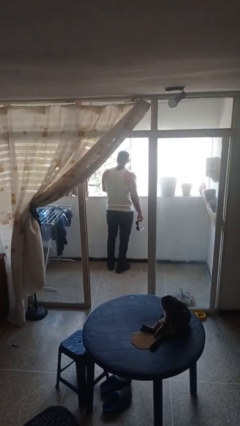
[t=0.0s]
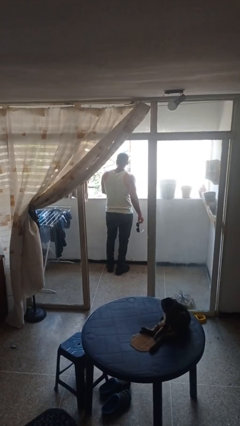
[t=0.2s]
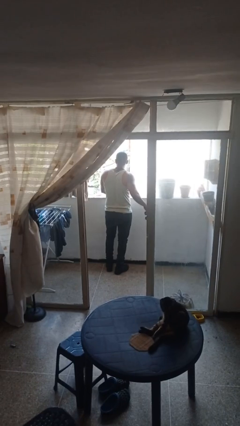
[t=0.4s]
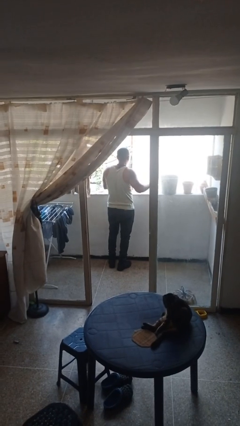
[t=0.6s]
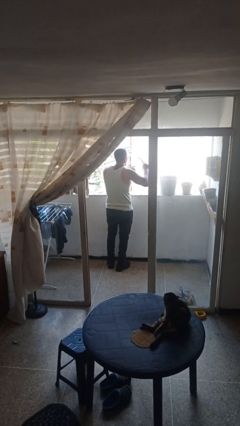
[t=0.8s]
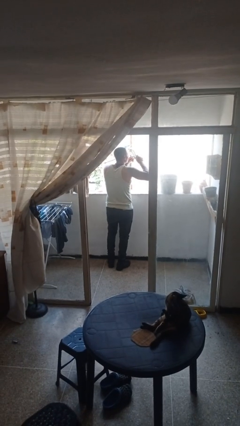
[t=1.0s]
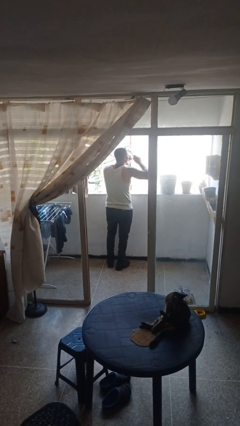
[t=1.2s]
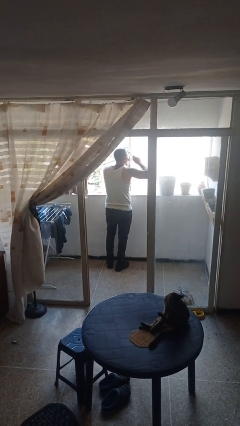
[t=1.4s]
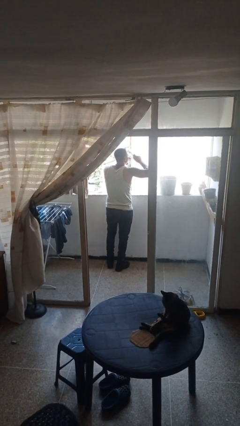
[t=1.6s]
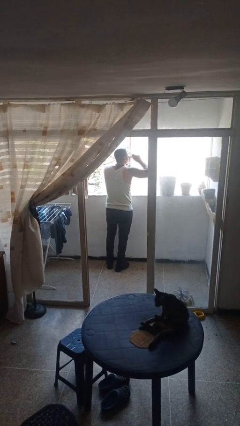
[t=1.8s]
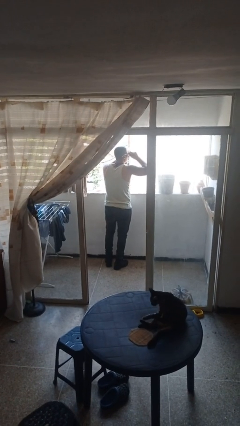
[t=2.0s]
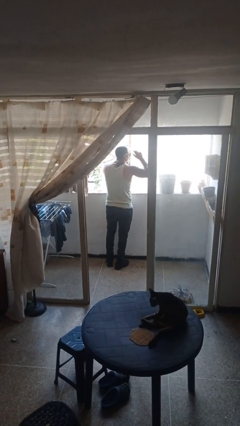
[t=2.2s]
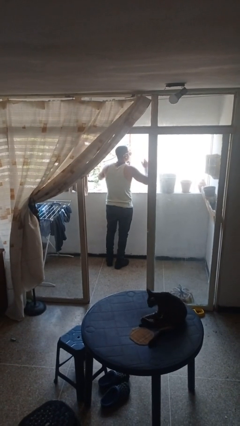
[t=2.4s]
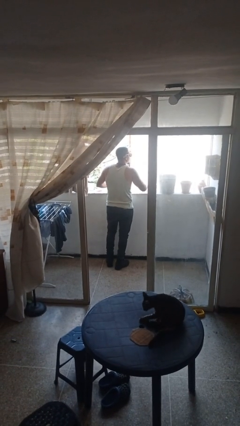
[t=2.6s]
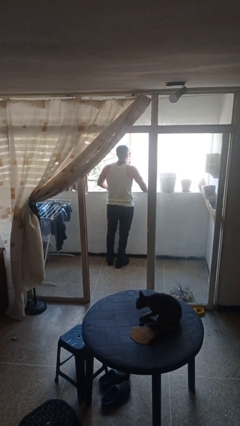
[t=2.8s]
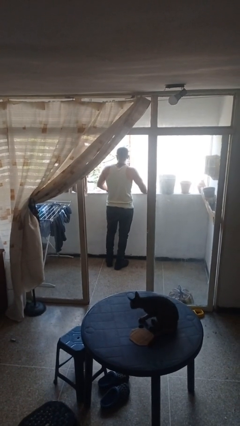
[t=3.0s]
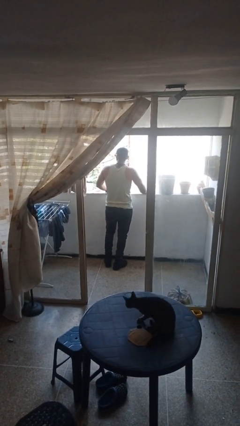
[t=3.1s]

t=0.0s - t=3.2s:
person puts on sunglasses

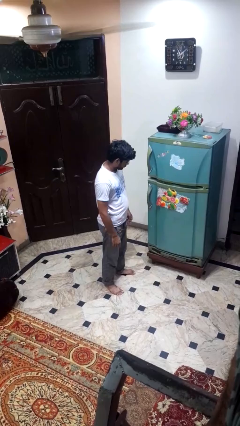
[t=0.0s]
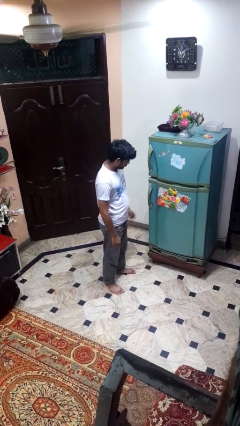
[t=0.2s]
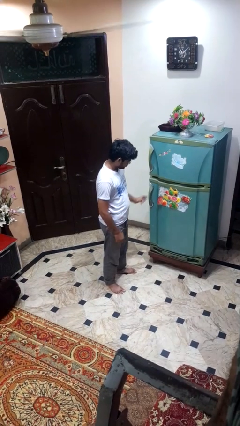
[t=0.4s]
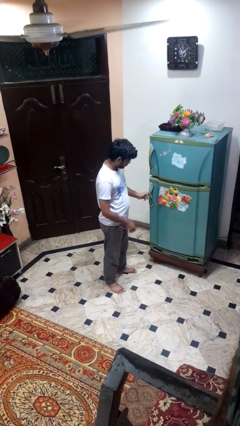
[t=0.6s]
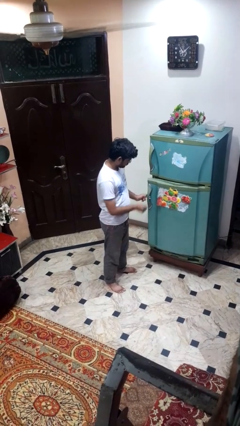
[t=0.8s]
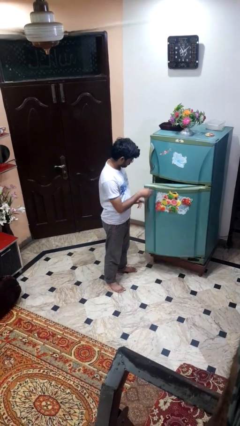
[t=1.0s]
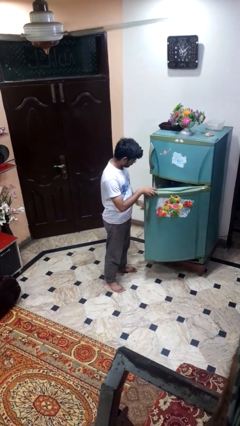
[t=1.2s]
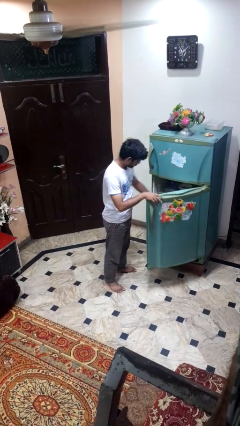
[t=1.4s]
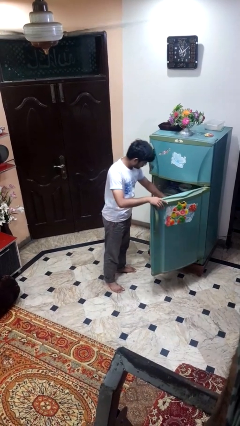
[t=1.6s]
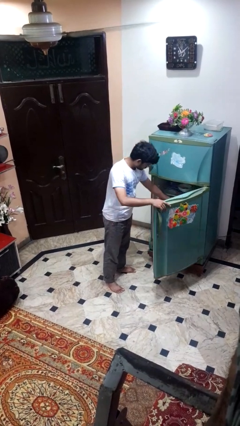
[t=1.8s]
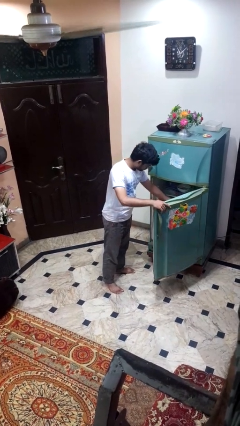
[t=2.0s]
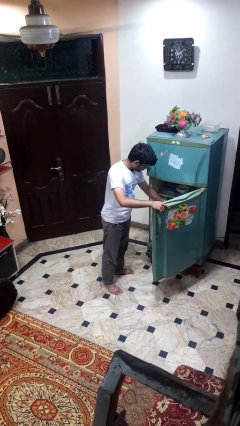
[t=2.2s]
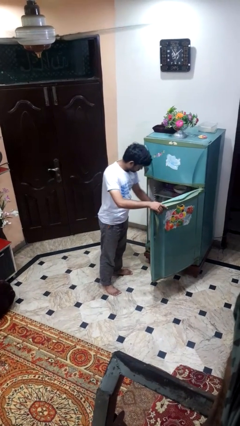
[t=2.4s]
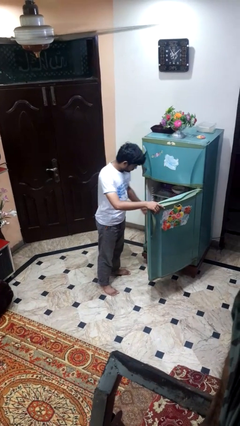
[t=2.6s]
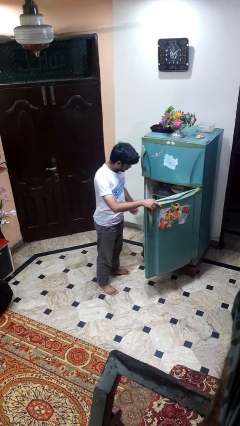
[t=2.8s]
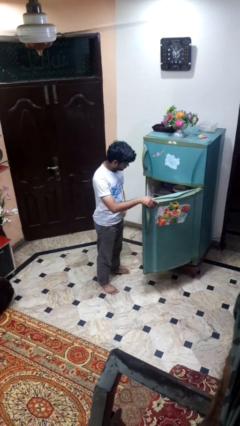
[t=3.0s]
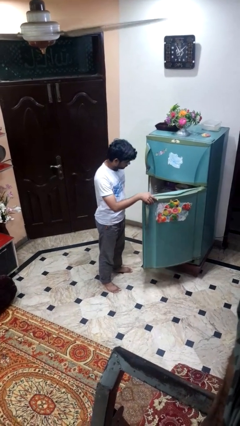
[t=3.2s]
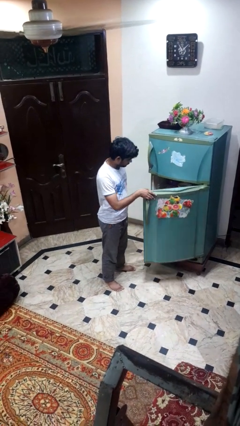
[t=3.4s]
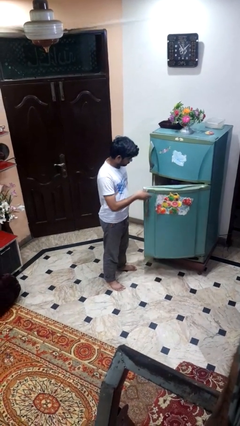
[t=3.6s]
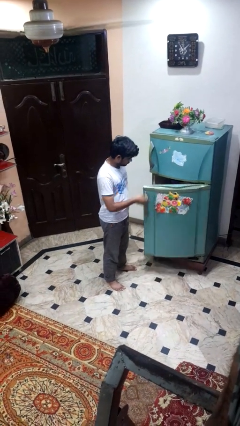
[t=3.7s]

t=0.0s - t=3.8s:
person takes object from refrigerator

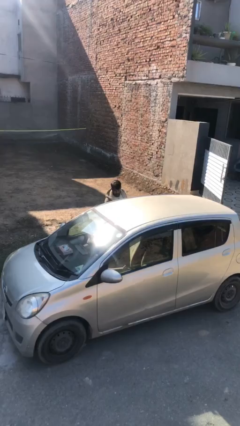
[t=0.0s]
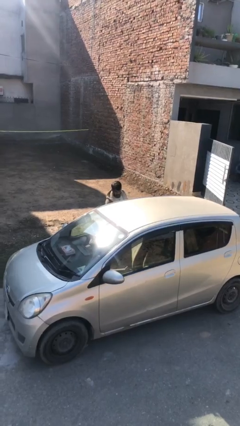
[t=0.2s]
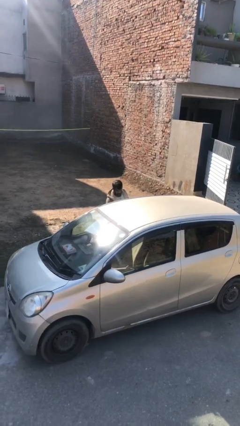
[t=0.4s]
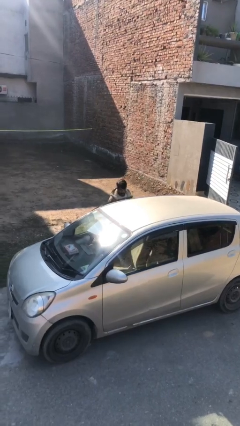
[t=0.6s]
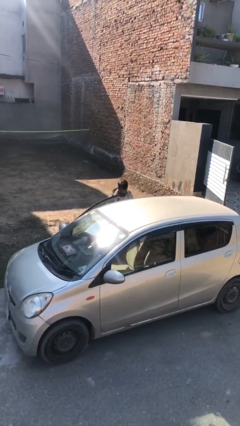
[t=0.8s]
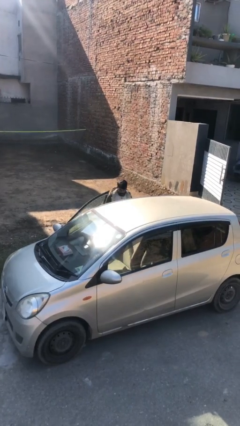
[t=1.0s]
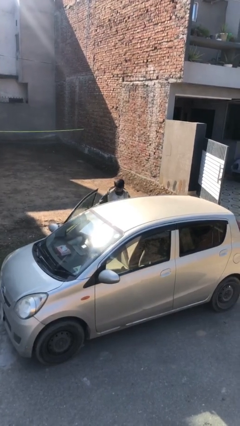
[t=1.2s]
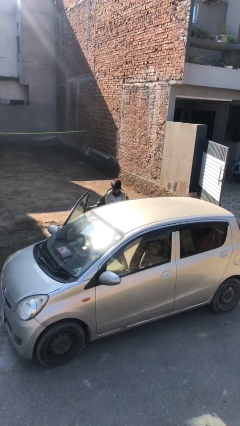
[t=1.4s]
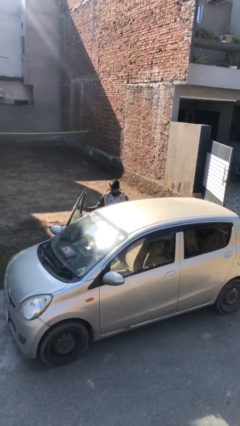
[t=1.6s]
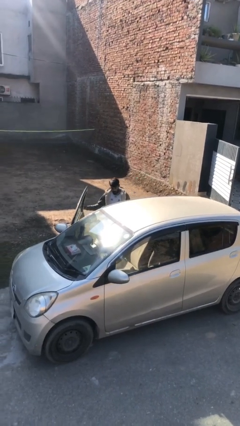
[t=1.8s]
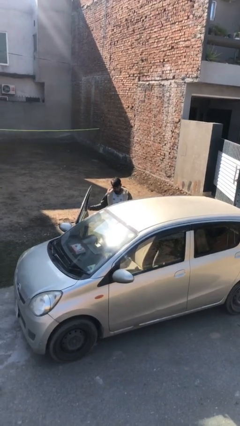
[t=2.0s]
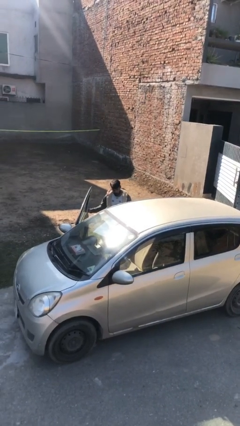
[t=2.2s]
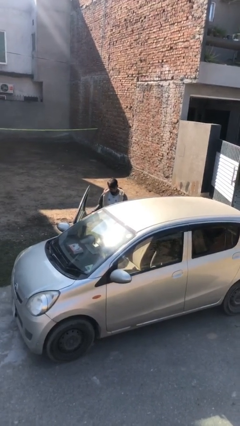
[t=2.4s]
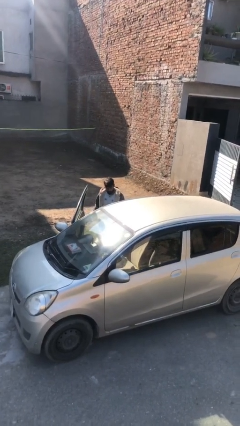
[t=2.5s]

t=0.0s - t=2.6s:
person opens car door

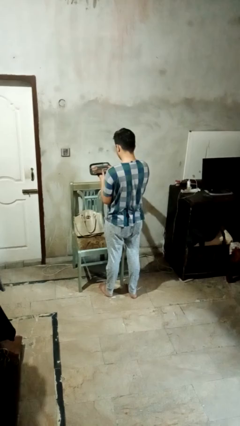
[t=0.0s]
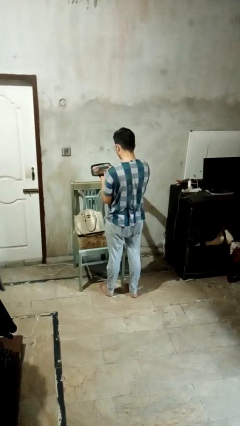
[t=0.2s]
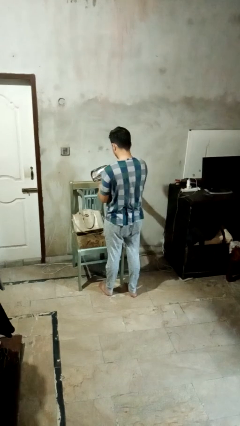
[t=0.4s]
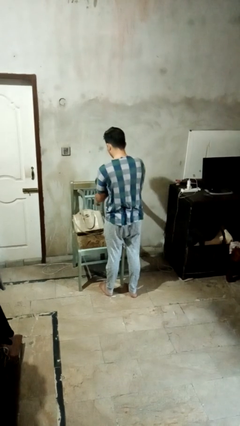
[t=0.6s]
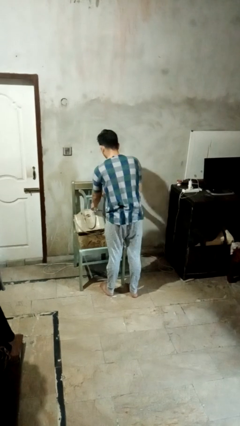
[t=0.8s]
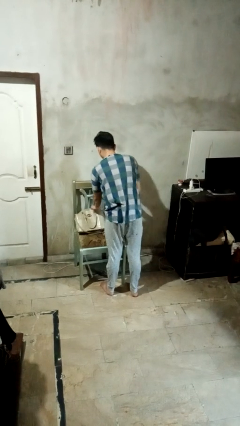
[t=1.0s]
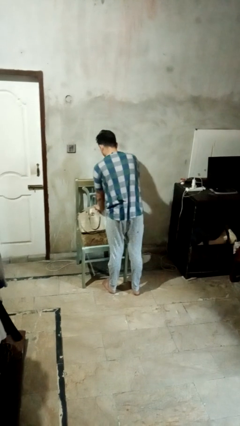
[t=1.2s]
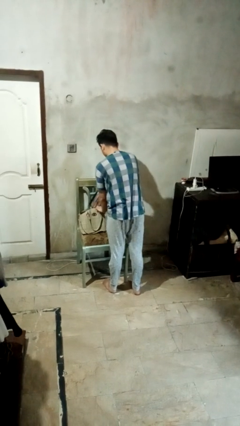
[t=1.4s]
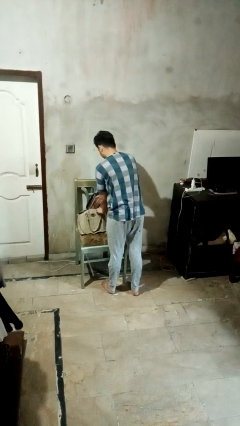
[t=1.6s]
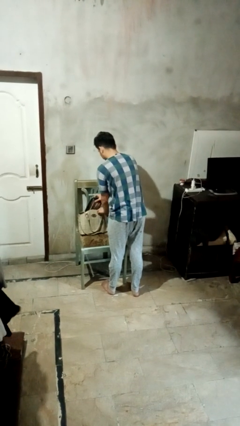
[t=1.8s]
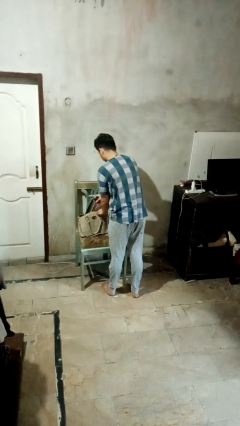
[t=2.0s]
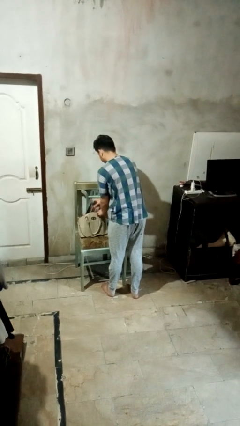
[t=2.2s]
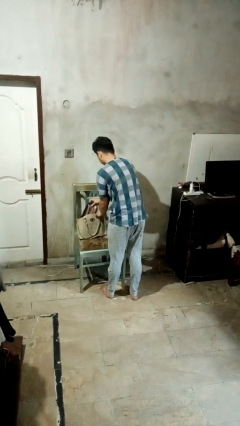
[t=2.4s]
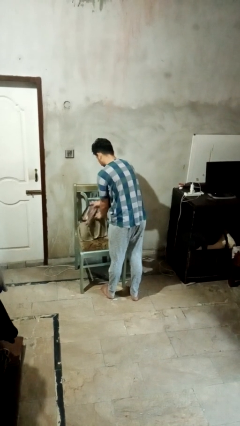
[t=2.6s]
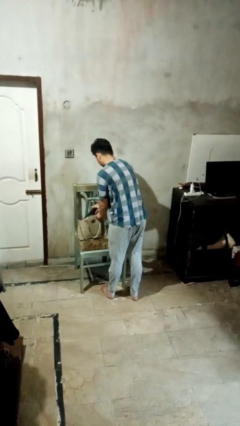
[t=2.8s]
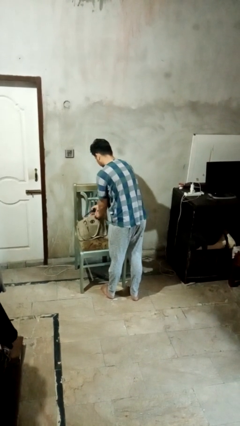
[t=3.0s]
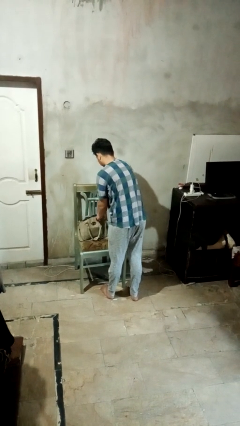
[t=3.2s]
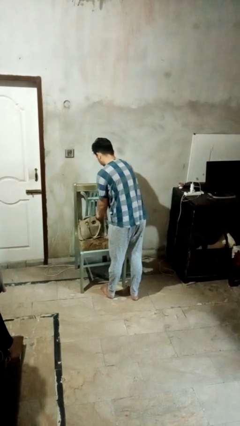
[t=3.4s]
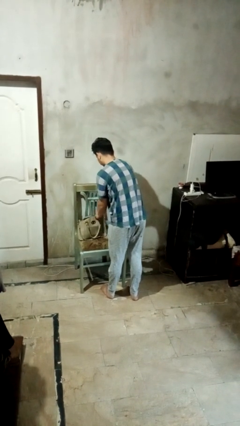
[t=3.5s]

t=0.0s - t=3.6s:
person puts object into purse

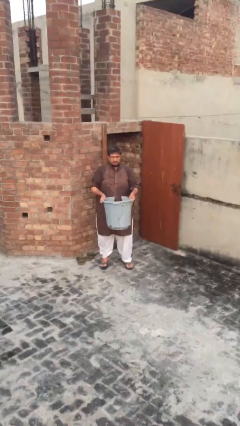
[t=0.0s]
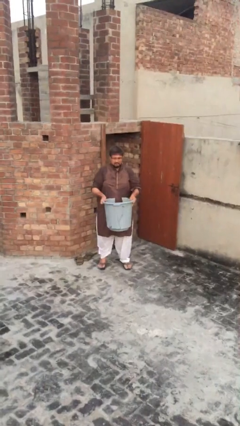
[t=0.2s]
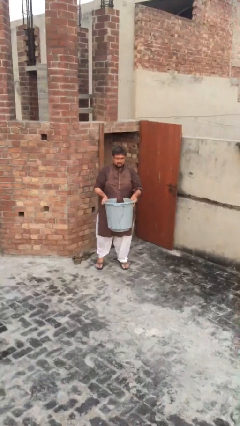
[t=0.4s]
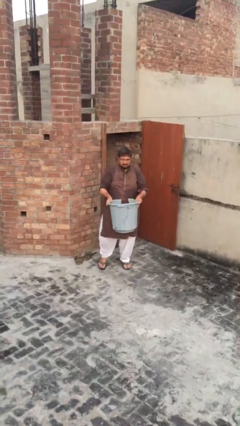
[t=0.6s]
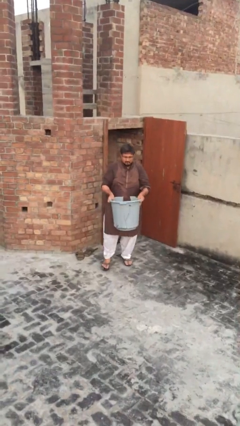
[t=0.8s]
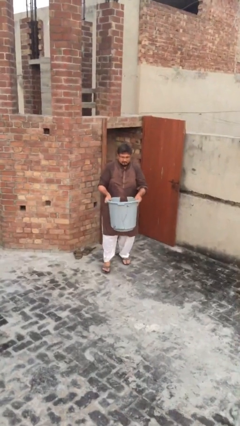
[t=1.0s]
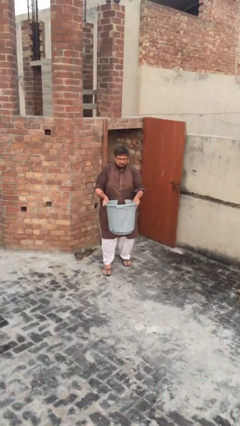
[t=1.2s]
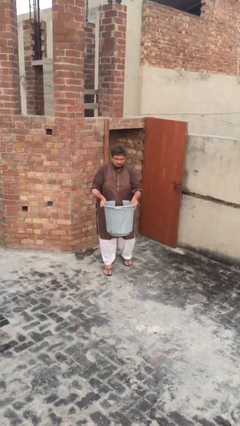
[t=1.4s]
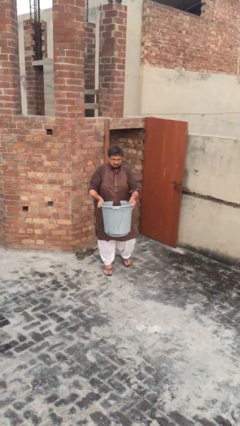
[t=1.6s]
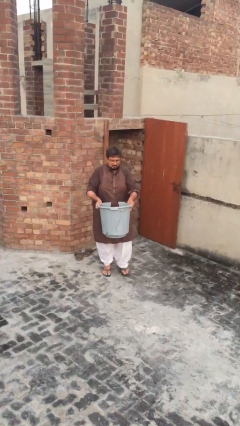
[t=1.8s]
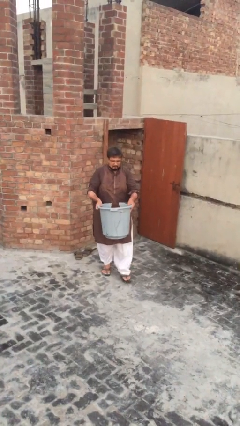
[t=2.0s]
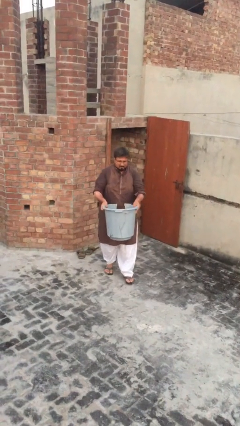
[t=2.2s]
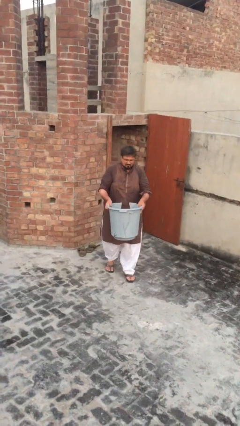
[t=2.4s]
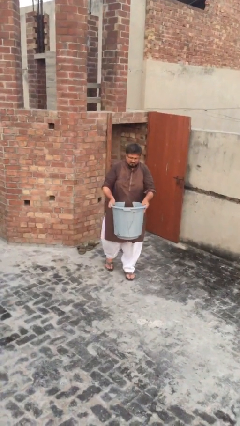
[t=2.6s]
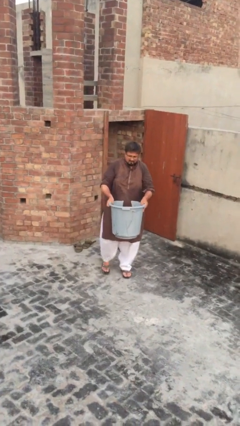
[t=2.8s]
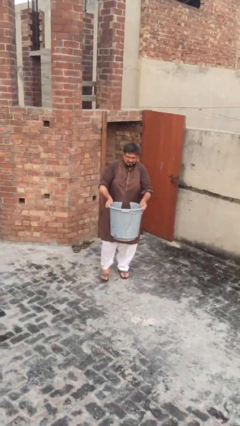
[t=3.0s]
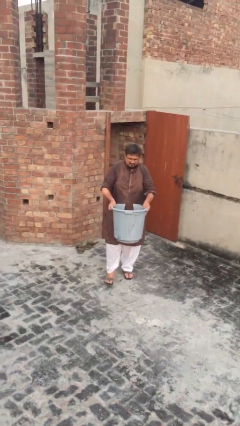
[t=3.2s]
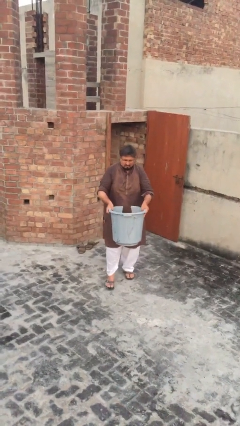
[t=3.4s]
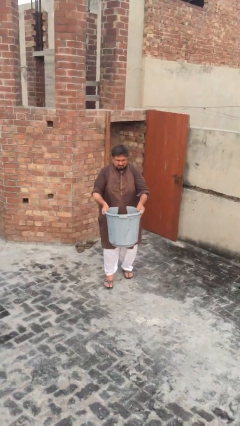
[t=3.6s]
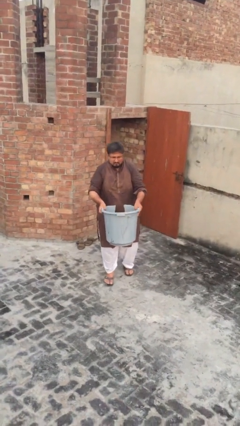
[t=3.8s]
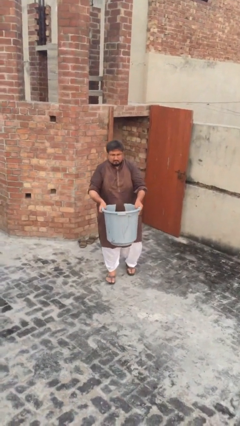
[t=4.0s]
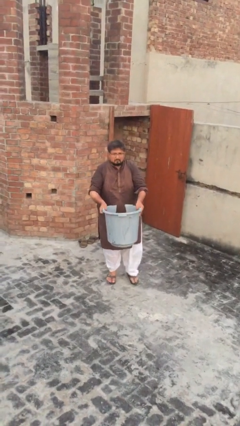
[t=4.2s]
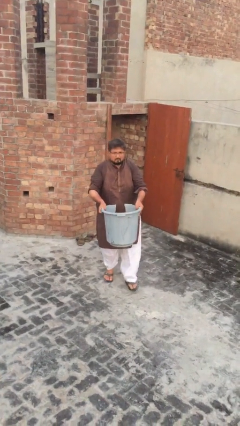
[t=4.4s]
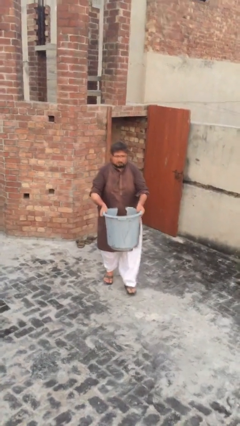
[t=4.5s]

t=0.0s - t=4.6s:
person carries heavy object
